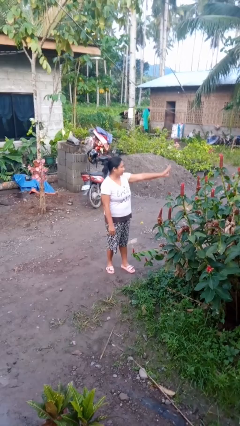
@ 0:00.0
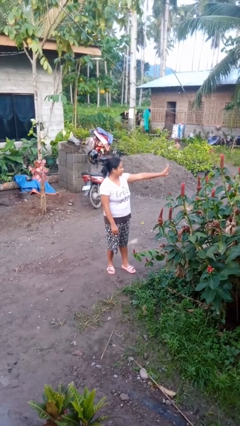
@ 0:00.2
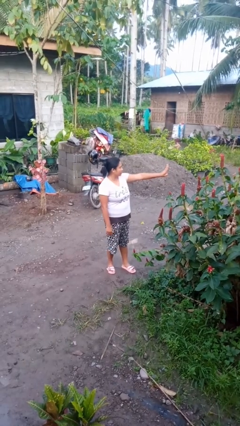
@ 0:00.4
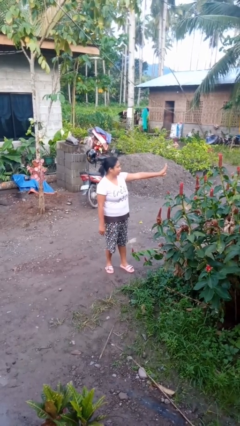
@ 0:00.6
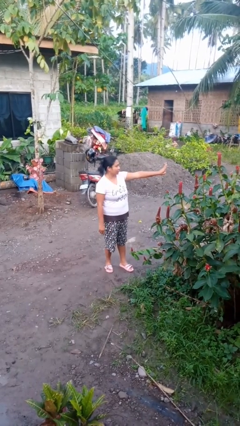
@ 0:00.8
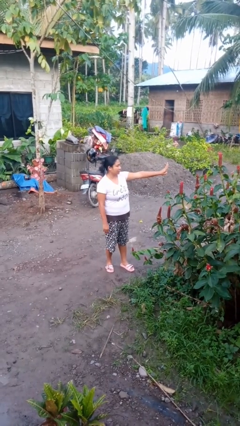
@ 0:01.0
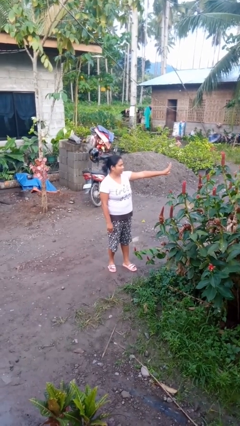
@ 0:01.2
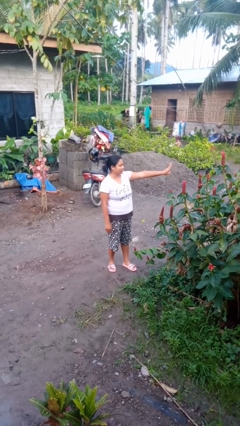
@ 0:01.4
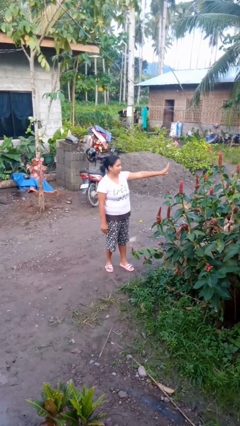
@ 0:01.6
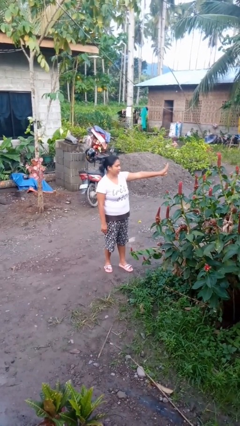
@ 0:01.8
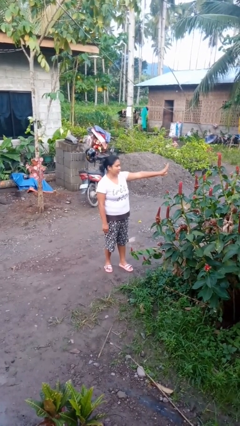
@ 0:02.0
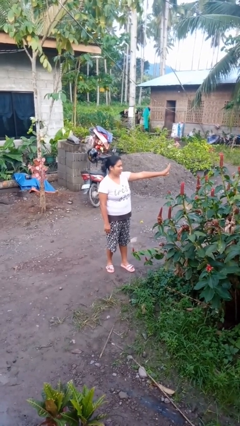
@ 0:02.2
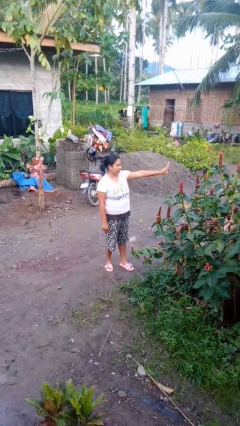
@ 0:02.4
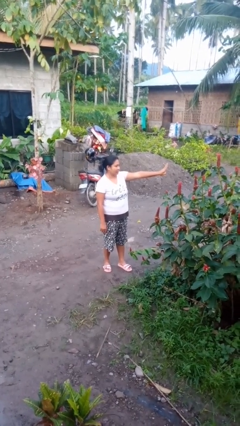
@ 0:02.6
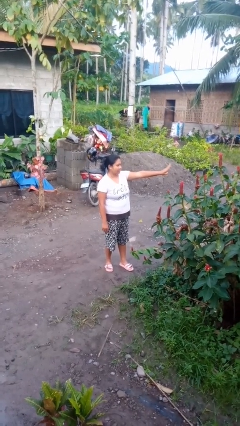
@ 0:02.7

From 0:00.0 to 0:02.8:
person gestures number three

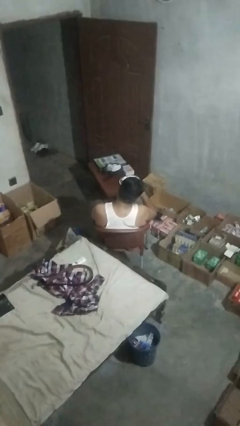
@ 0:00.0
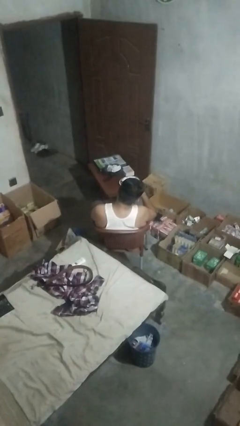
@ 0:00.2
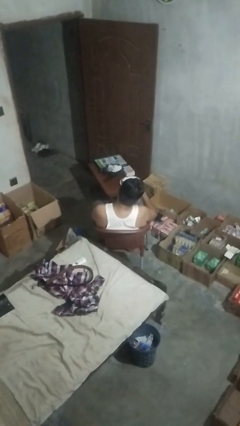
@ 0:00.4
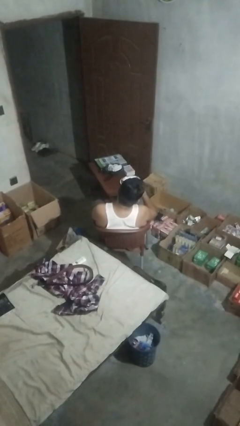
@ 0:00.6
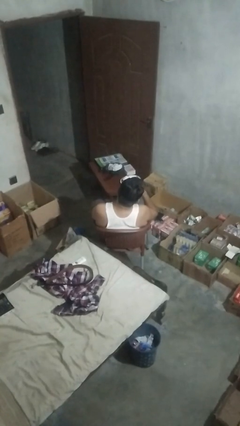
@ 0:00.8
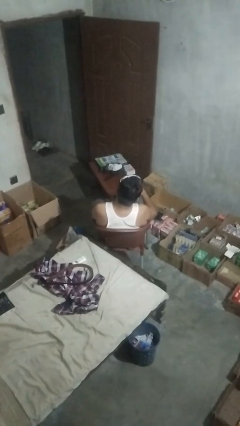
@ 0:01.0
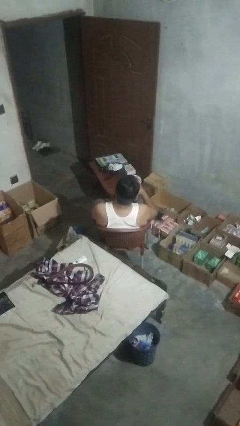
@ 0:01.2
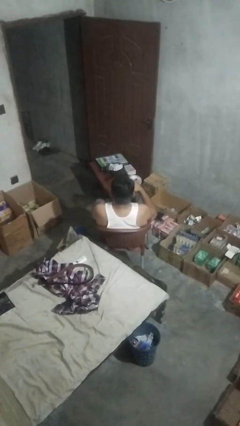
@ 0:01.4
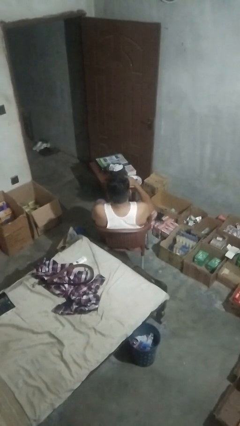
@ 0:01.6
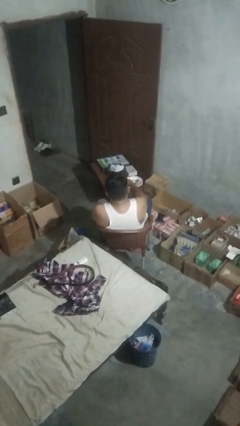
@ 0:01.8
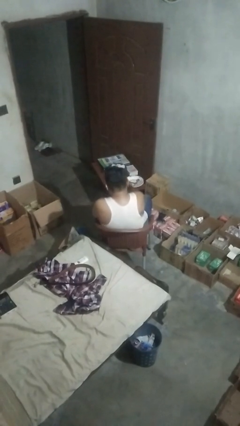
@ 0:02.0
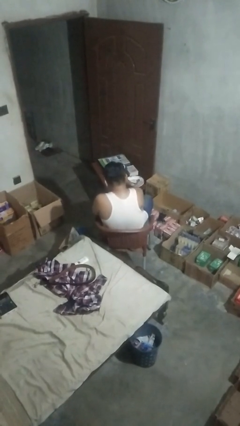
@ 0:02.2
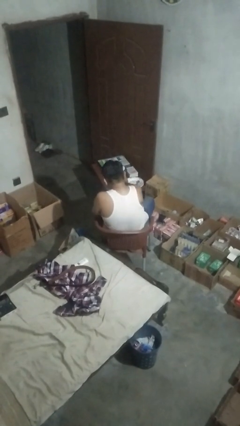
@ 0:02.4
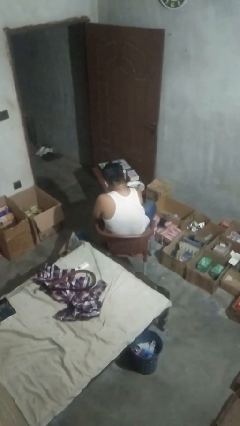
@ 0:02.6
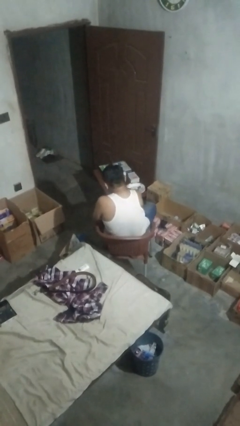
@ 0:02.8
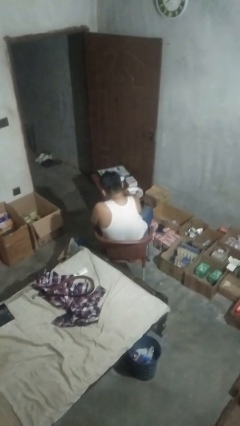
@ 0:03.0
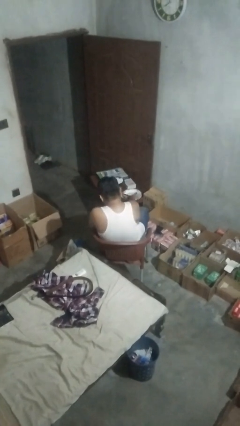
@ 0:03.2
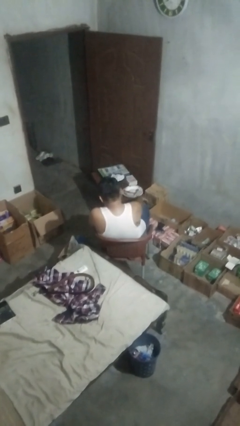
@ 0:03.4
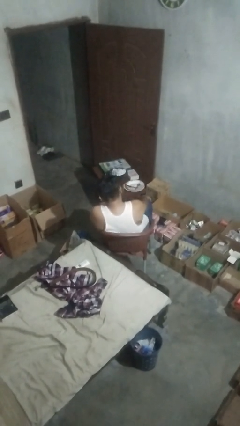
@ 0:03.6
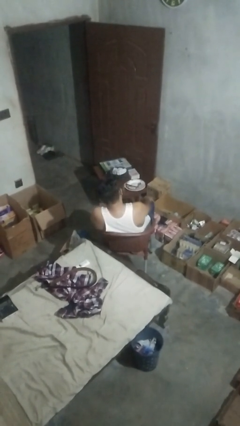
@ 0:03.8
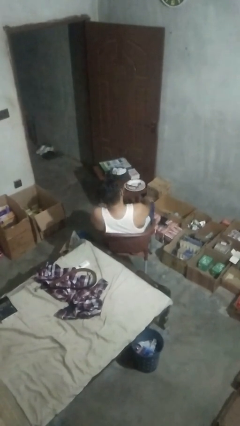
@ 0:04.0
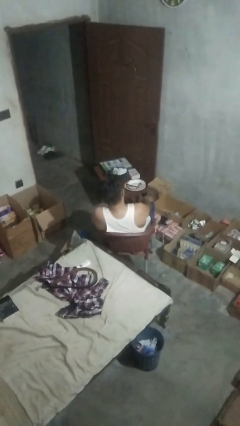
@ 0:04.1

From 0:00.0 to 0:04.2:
person puts down object on table

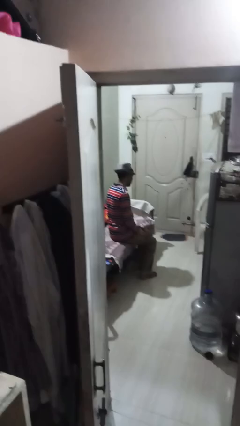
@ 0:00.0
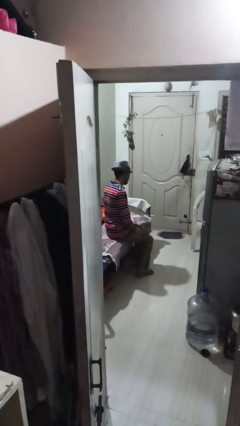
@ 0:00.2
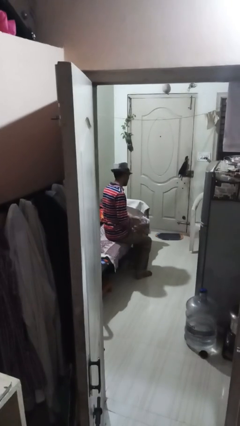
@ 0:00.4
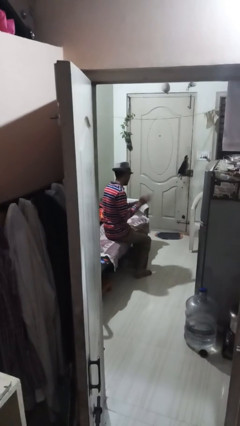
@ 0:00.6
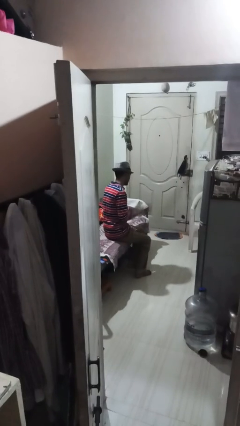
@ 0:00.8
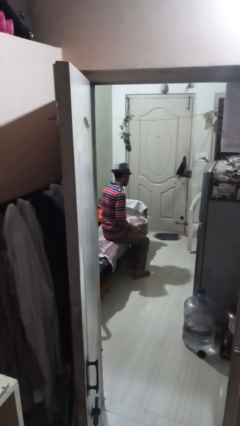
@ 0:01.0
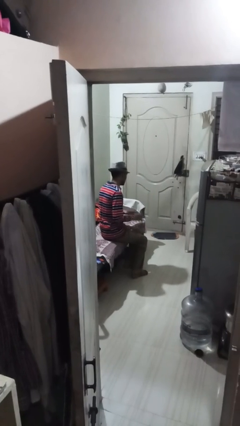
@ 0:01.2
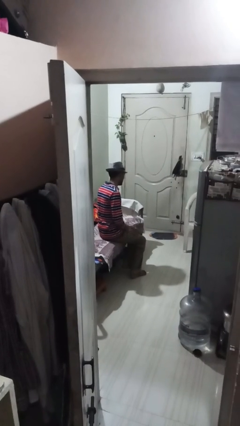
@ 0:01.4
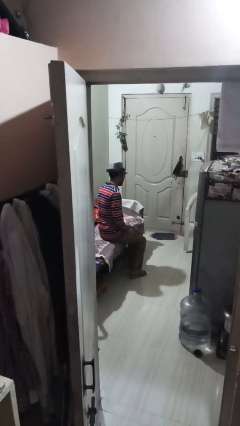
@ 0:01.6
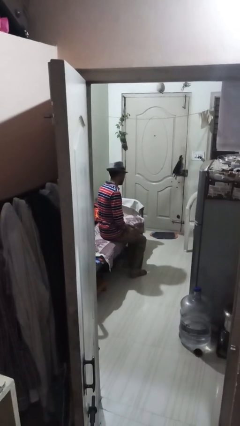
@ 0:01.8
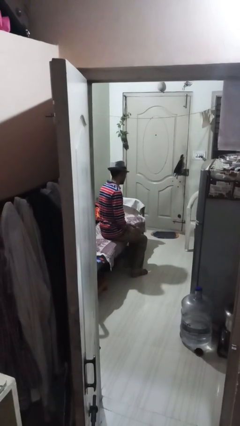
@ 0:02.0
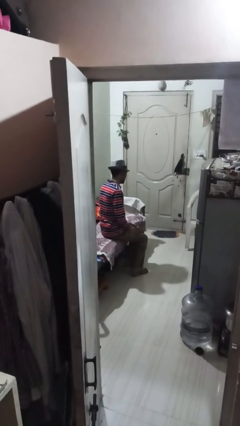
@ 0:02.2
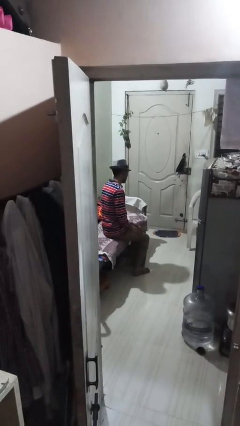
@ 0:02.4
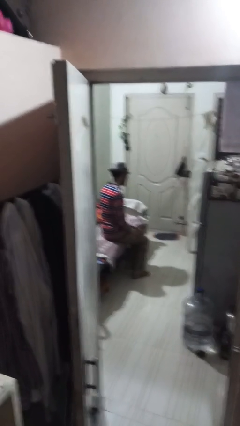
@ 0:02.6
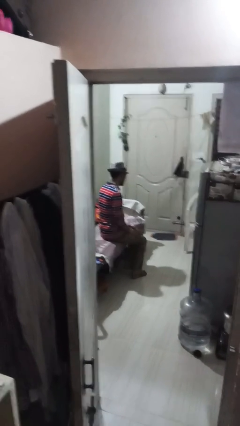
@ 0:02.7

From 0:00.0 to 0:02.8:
person slaps hands on thighs

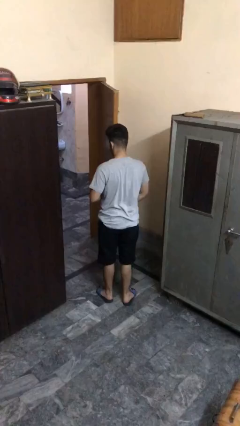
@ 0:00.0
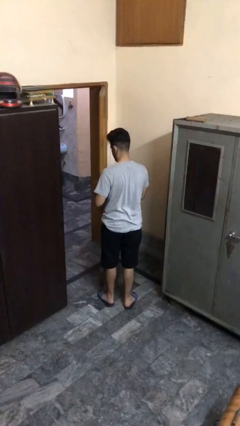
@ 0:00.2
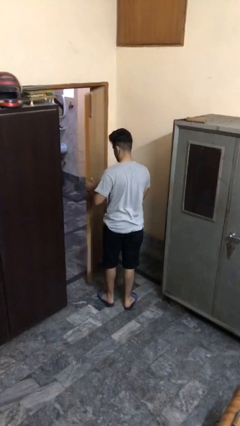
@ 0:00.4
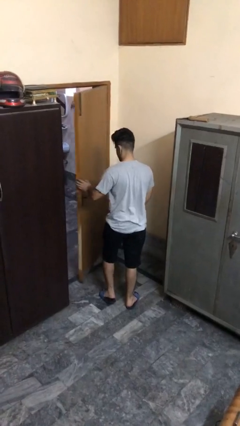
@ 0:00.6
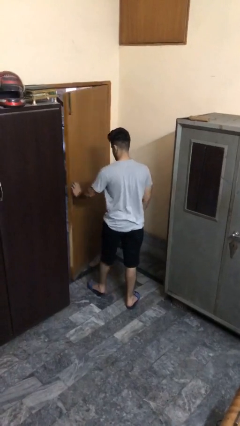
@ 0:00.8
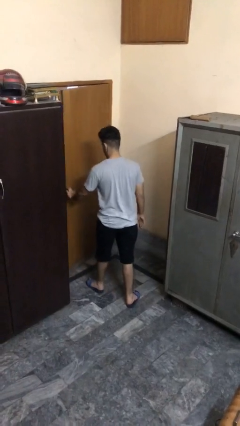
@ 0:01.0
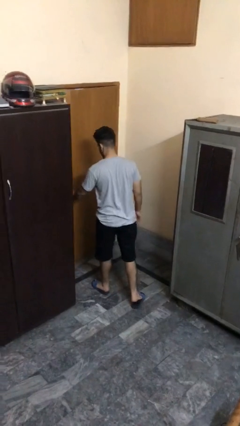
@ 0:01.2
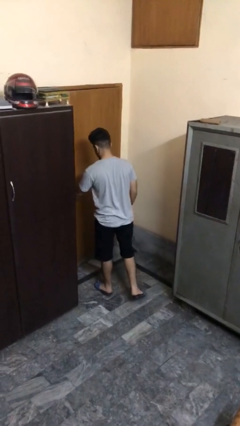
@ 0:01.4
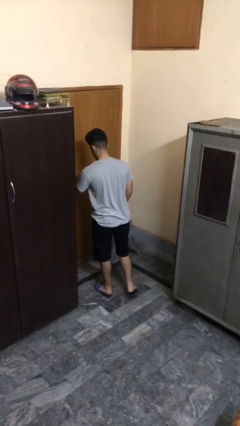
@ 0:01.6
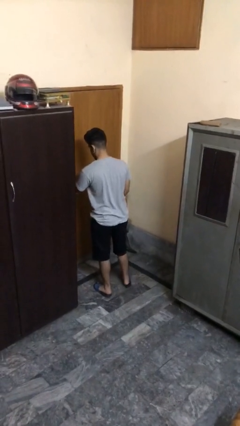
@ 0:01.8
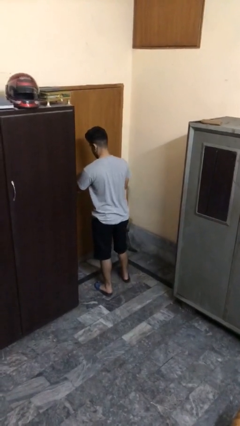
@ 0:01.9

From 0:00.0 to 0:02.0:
person closes facility door

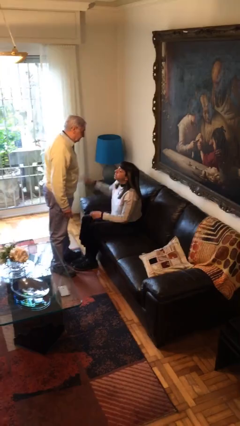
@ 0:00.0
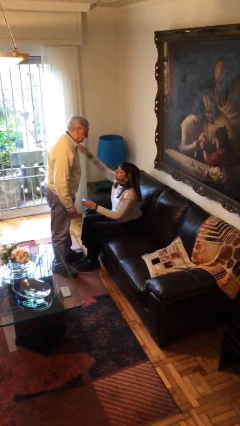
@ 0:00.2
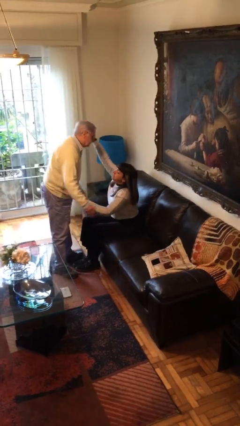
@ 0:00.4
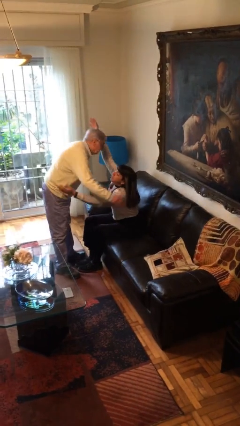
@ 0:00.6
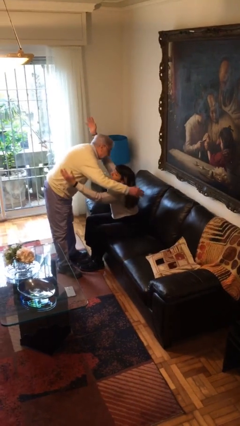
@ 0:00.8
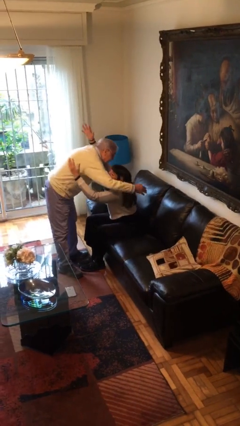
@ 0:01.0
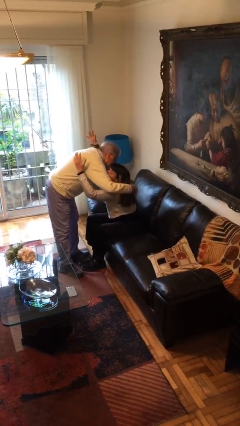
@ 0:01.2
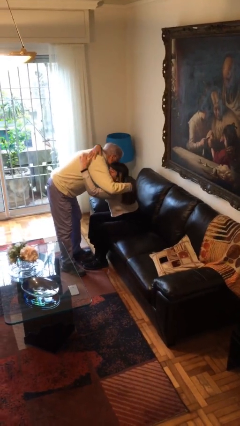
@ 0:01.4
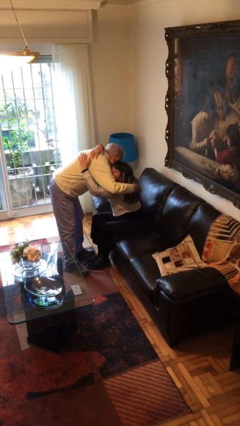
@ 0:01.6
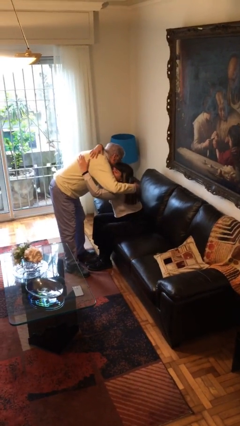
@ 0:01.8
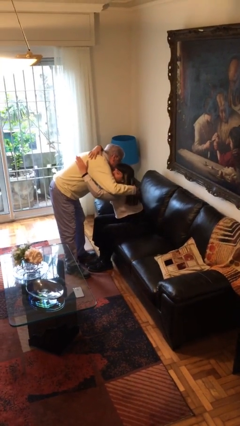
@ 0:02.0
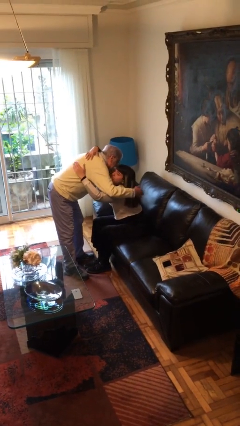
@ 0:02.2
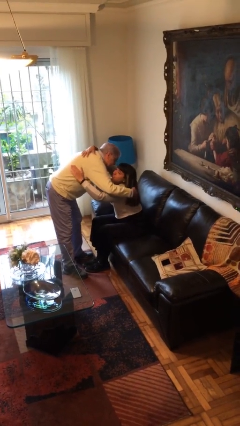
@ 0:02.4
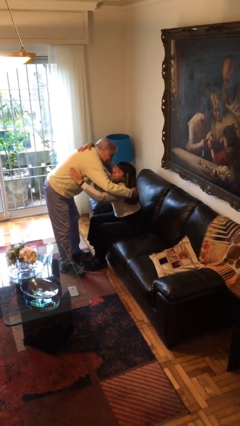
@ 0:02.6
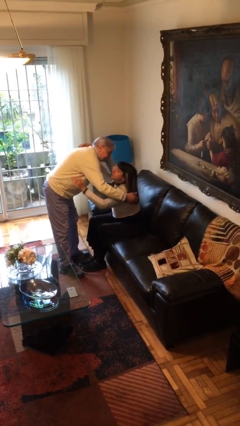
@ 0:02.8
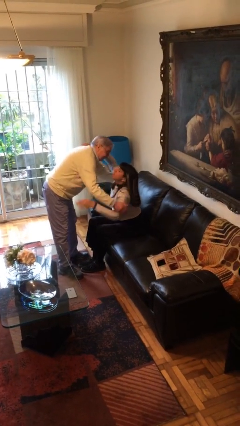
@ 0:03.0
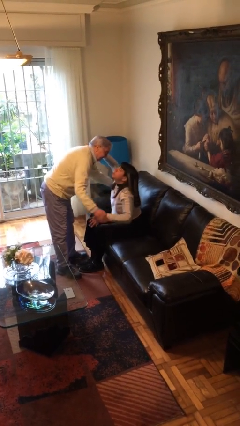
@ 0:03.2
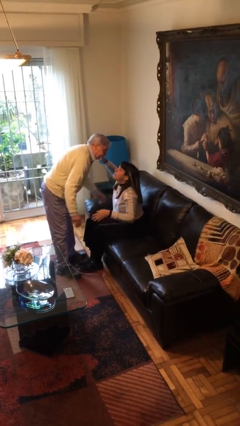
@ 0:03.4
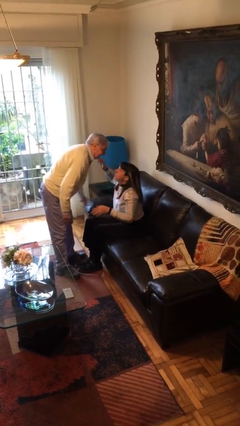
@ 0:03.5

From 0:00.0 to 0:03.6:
person embraces person

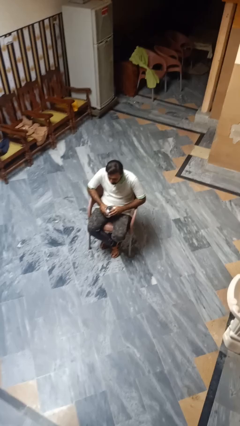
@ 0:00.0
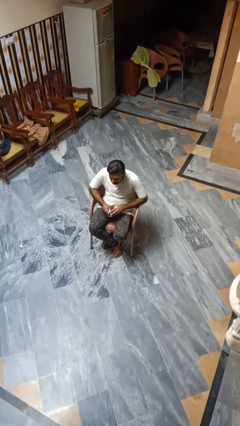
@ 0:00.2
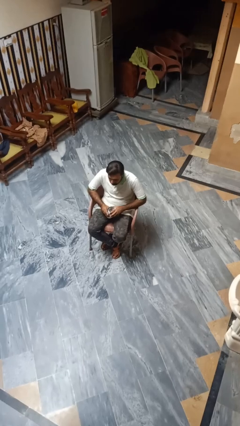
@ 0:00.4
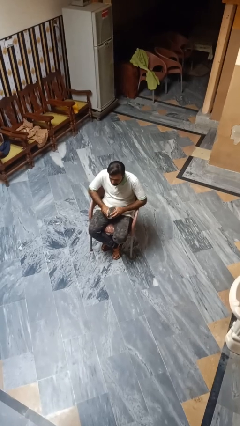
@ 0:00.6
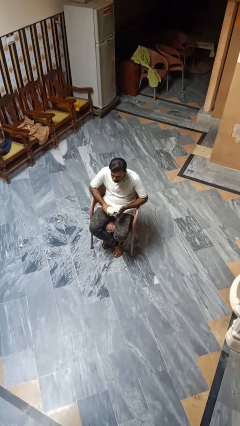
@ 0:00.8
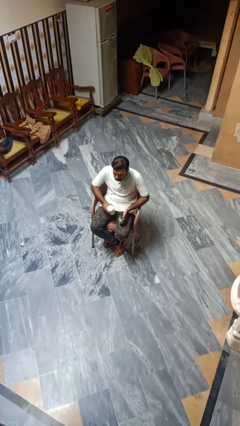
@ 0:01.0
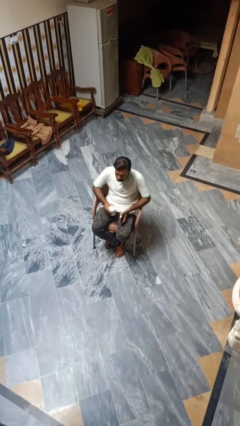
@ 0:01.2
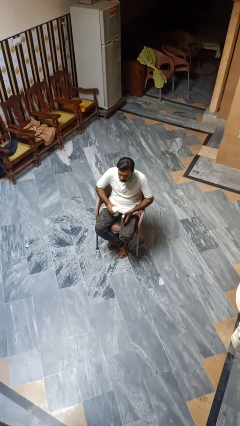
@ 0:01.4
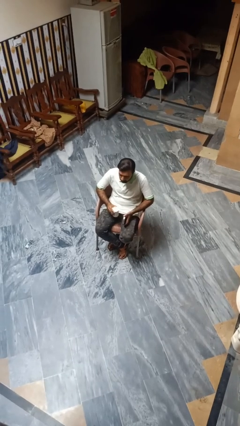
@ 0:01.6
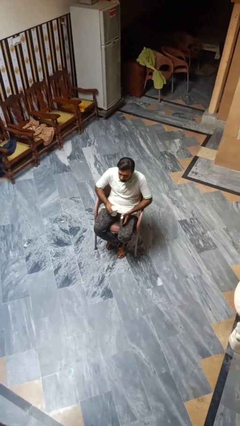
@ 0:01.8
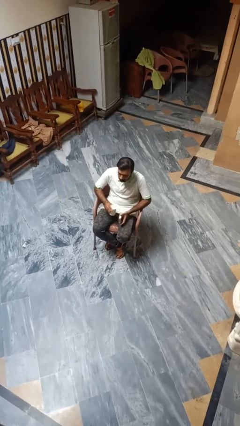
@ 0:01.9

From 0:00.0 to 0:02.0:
person opens beverage can
